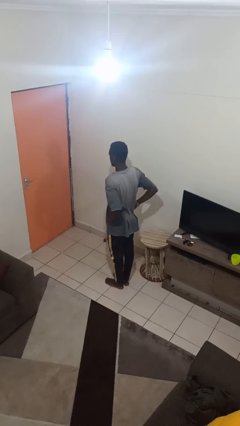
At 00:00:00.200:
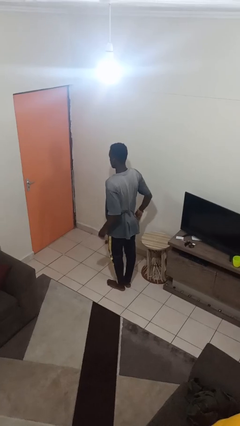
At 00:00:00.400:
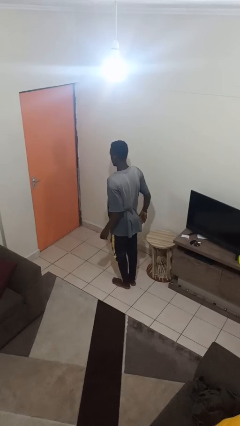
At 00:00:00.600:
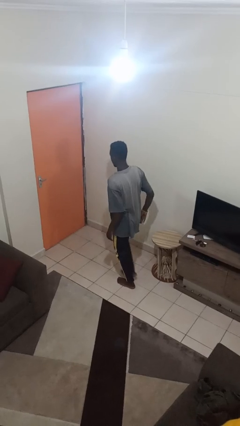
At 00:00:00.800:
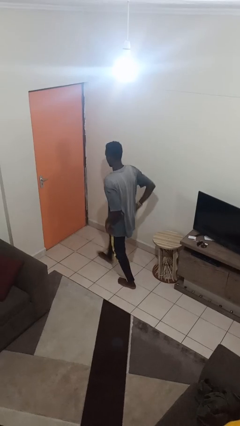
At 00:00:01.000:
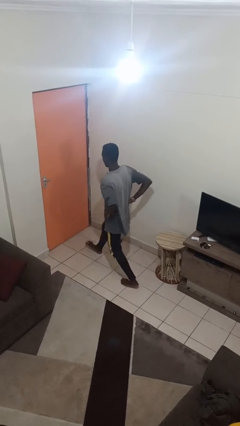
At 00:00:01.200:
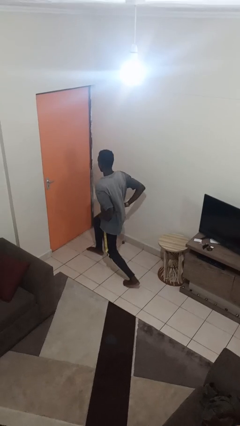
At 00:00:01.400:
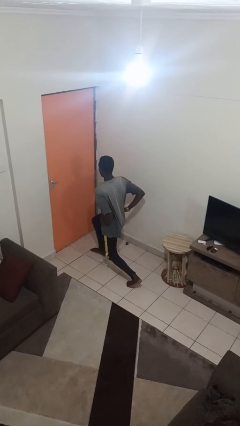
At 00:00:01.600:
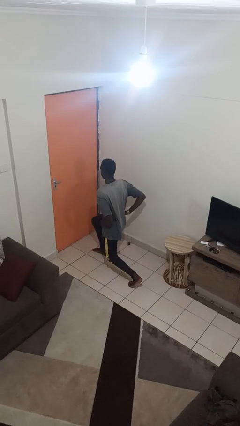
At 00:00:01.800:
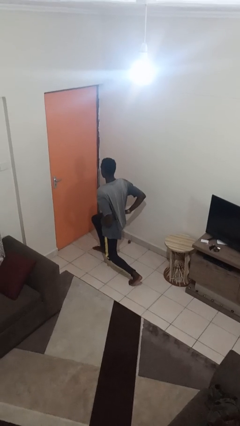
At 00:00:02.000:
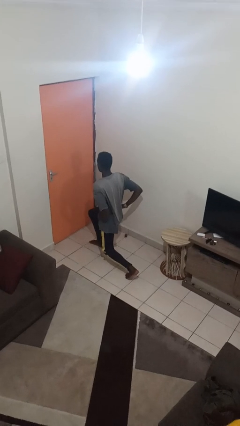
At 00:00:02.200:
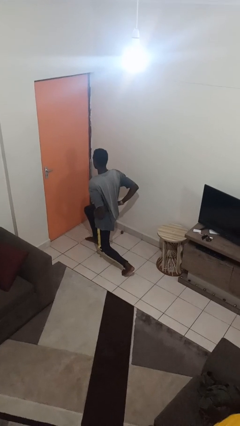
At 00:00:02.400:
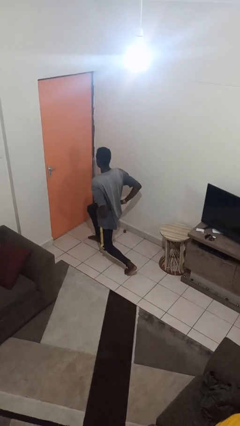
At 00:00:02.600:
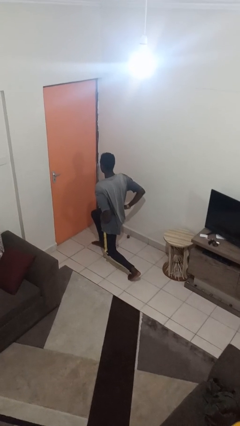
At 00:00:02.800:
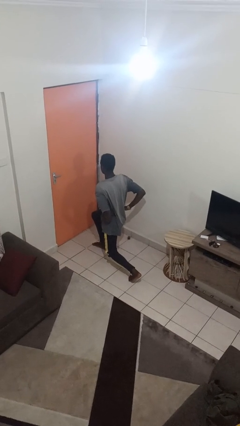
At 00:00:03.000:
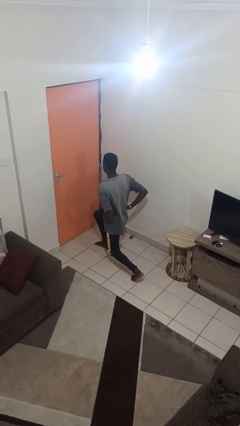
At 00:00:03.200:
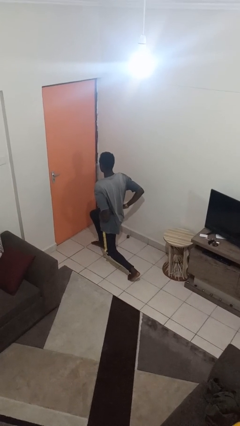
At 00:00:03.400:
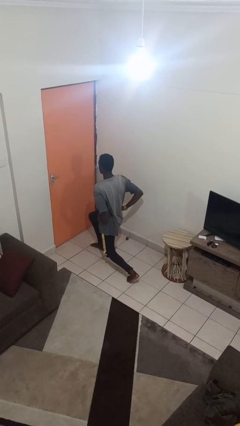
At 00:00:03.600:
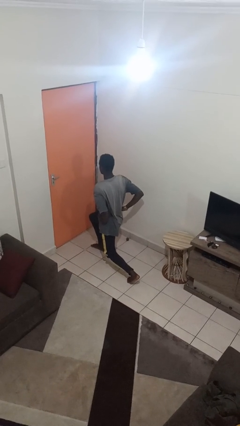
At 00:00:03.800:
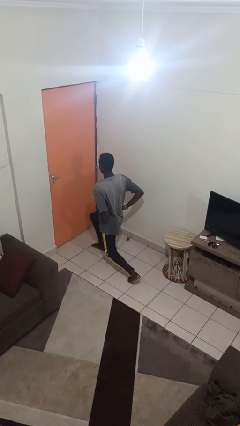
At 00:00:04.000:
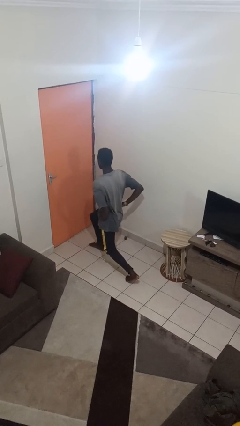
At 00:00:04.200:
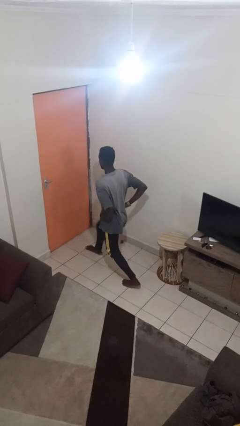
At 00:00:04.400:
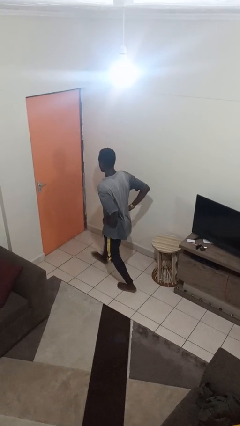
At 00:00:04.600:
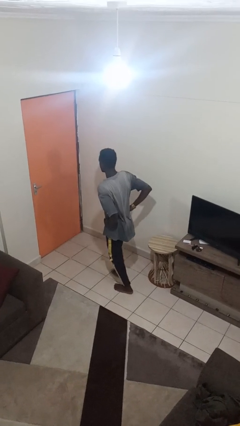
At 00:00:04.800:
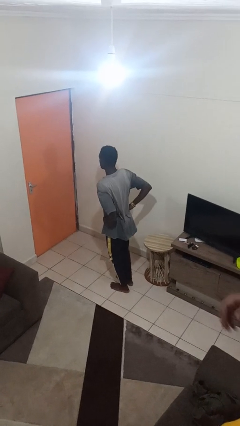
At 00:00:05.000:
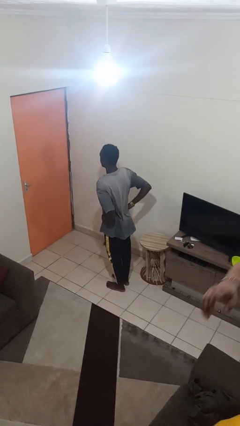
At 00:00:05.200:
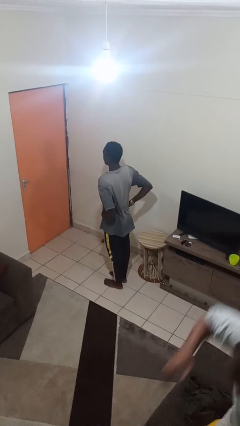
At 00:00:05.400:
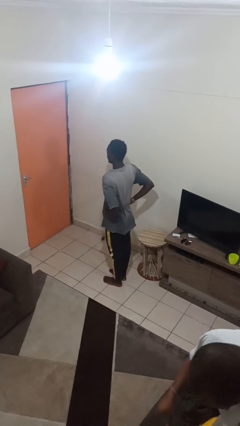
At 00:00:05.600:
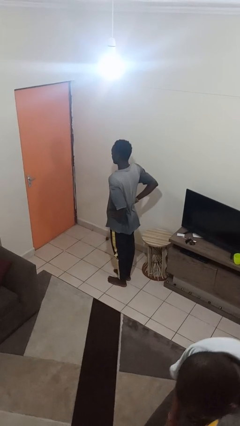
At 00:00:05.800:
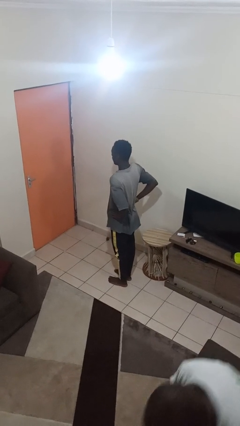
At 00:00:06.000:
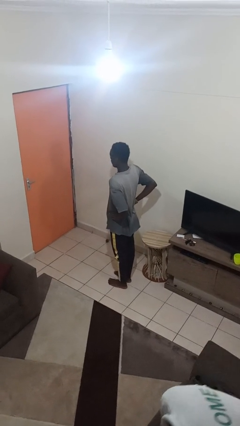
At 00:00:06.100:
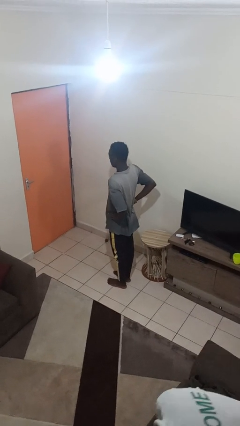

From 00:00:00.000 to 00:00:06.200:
person exercises with lunges

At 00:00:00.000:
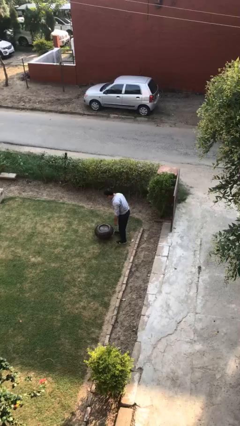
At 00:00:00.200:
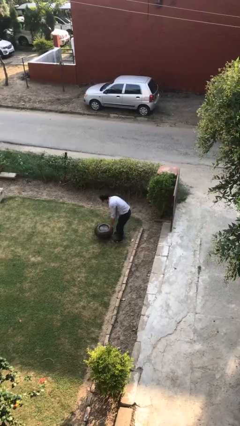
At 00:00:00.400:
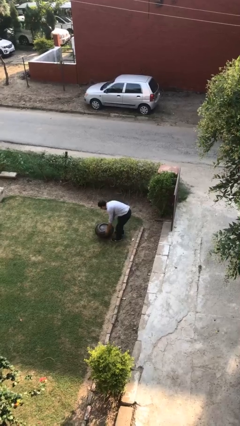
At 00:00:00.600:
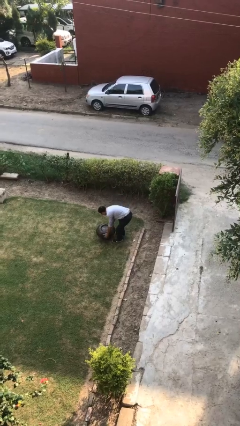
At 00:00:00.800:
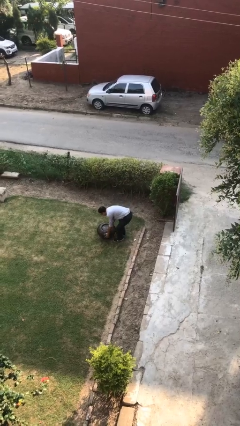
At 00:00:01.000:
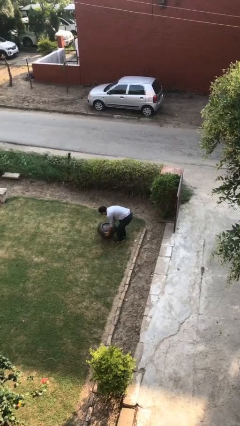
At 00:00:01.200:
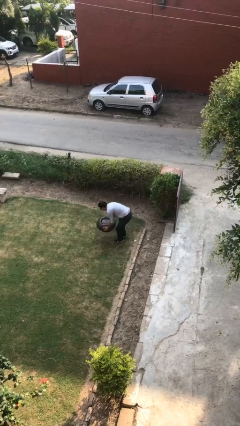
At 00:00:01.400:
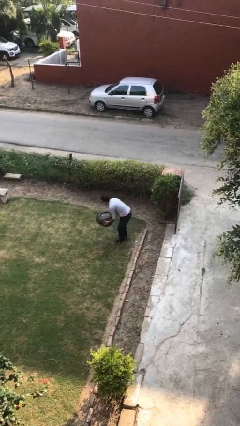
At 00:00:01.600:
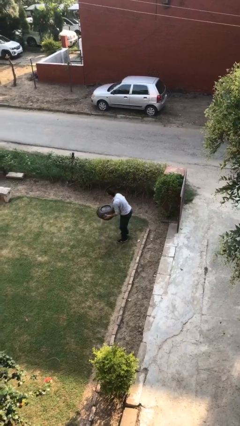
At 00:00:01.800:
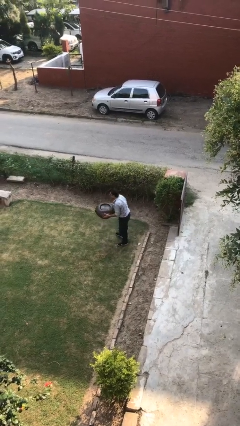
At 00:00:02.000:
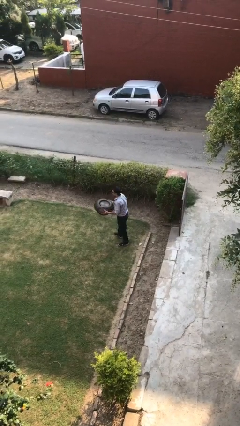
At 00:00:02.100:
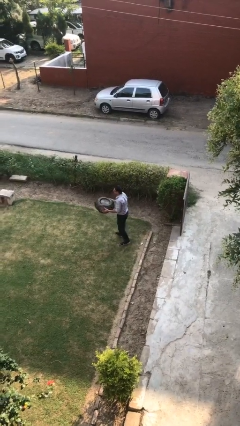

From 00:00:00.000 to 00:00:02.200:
person picks up object from floor

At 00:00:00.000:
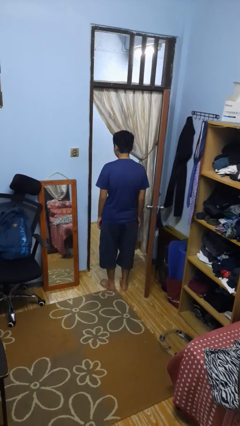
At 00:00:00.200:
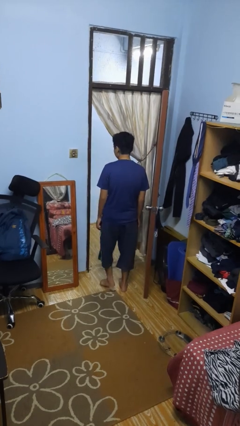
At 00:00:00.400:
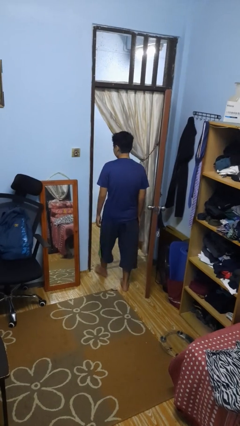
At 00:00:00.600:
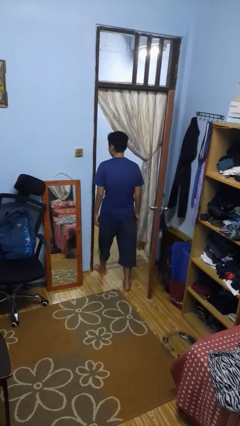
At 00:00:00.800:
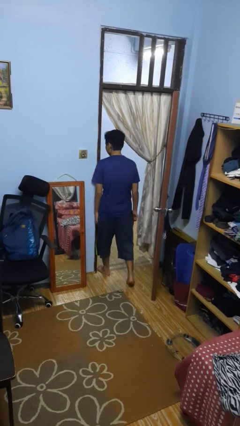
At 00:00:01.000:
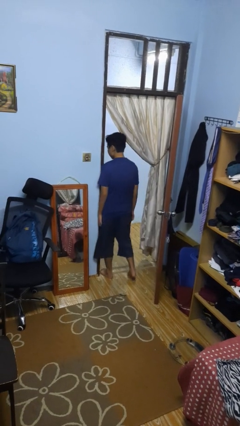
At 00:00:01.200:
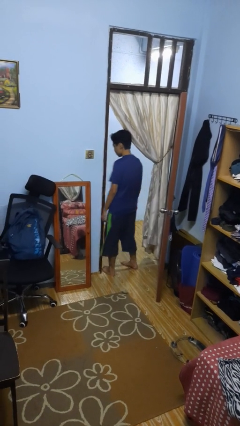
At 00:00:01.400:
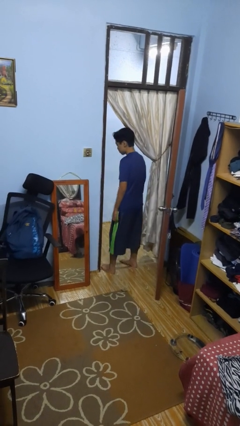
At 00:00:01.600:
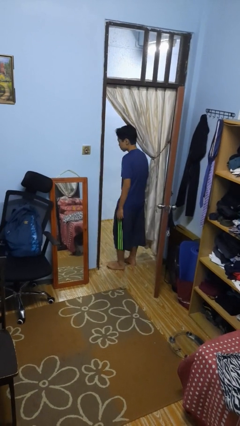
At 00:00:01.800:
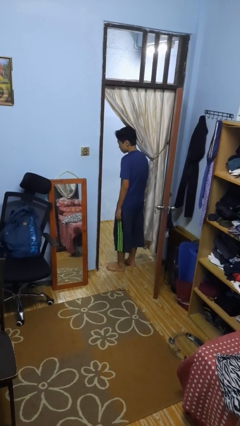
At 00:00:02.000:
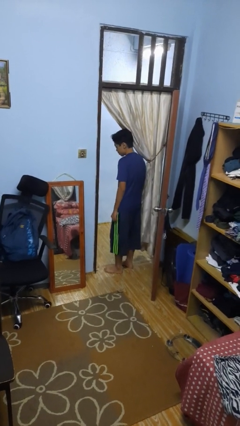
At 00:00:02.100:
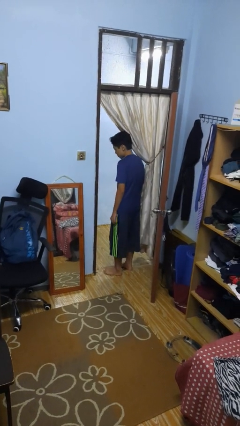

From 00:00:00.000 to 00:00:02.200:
person bumps into wall

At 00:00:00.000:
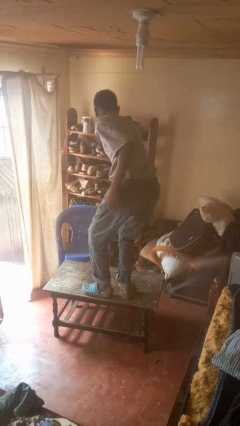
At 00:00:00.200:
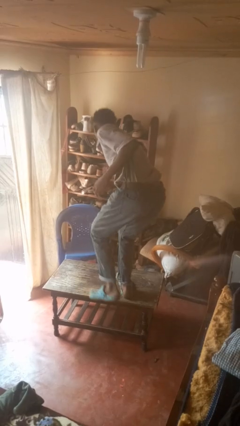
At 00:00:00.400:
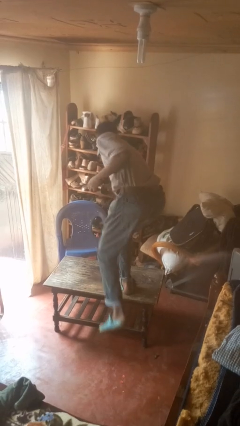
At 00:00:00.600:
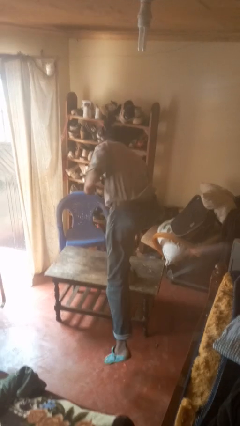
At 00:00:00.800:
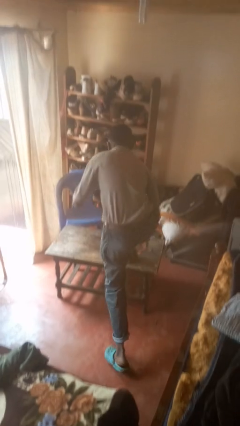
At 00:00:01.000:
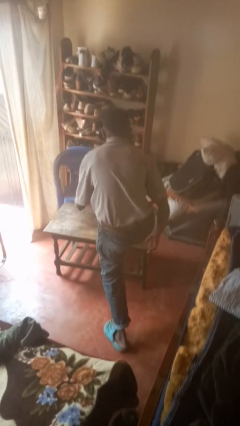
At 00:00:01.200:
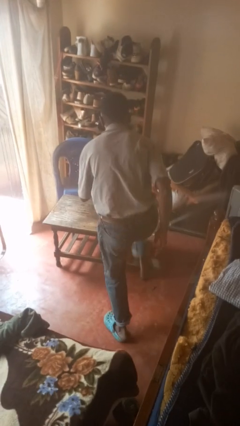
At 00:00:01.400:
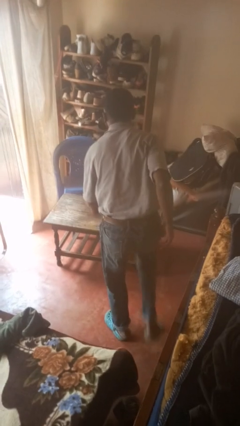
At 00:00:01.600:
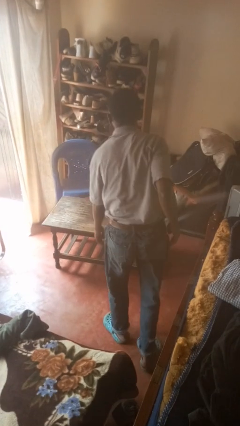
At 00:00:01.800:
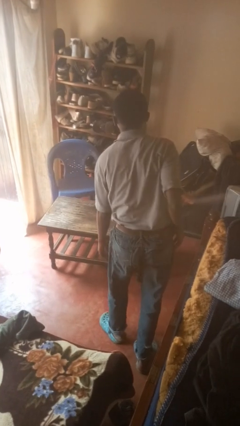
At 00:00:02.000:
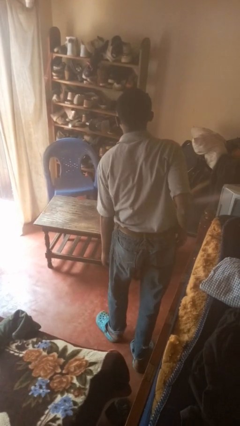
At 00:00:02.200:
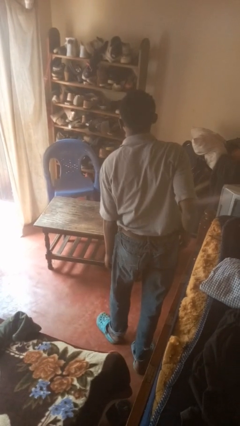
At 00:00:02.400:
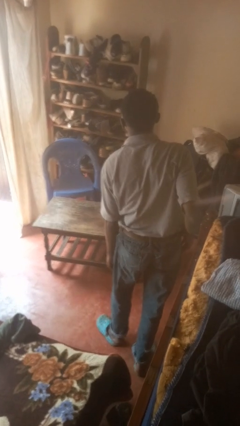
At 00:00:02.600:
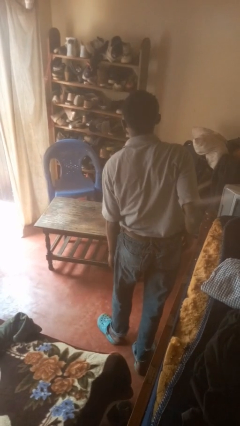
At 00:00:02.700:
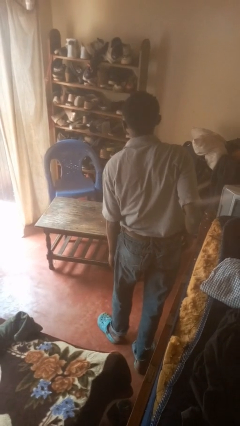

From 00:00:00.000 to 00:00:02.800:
person climbs off table

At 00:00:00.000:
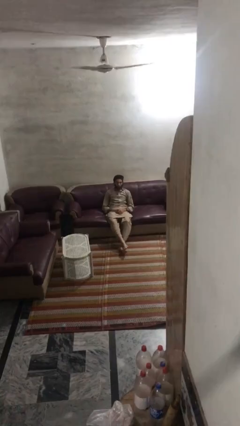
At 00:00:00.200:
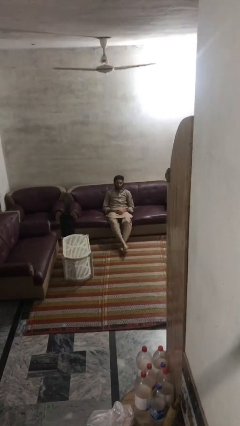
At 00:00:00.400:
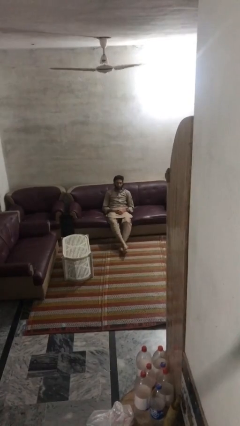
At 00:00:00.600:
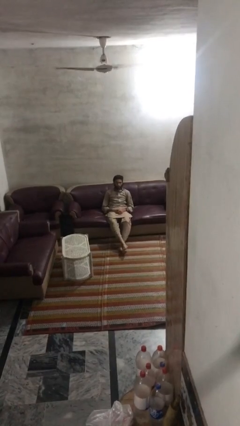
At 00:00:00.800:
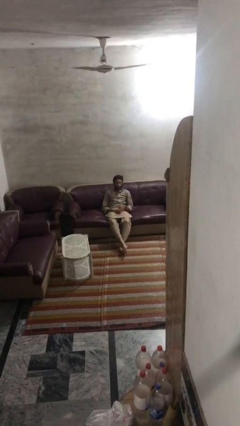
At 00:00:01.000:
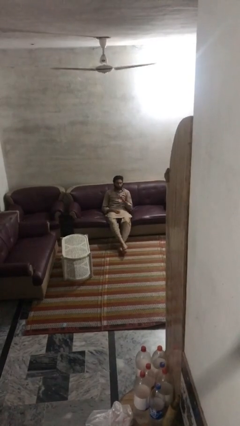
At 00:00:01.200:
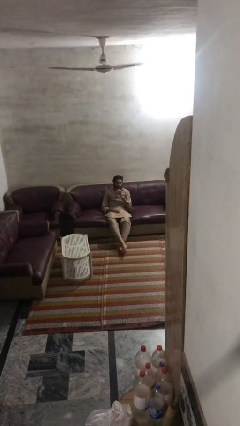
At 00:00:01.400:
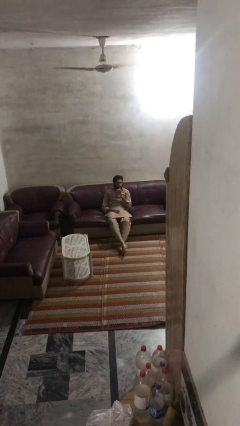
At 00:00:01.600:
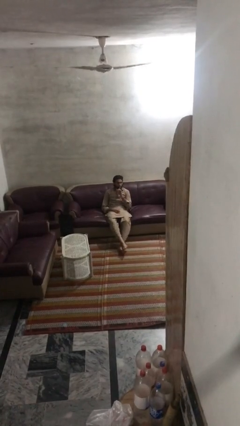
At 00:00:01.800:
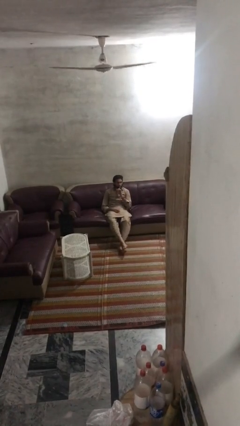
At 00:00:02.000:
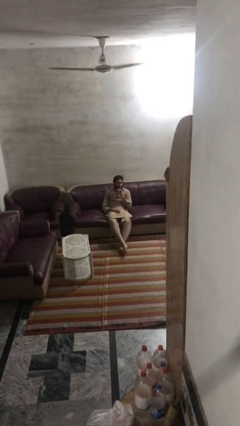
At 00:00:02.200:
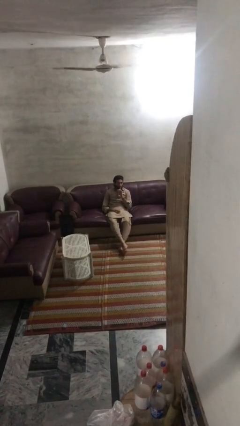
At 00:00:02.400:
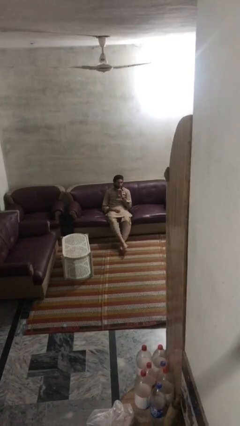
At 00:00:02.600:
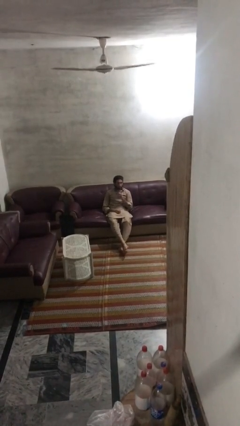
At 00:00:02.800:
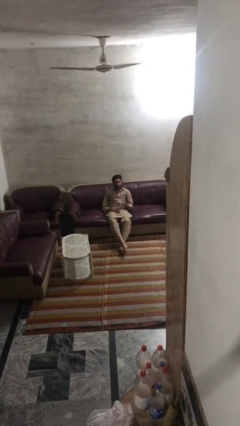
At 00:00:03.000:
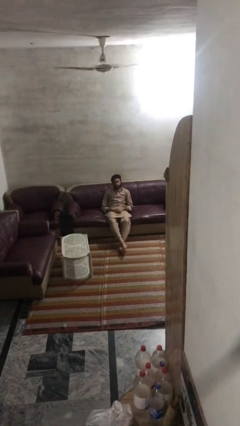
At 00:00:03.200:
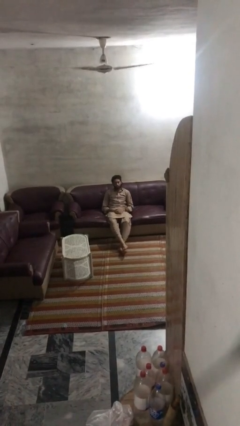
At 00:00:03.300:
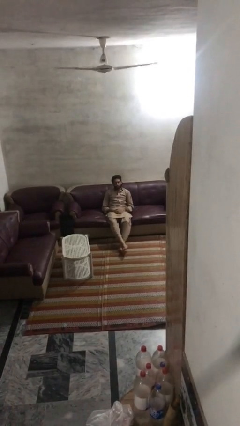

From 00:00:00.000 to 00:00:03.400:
person gestures be quiet
